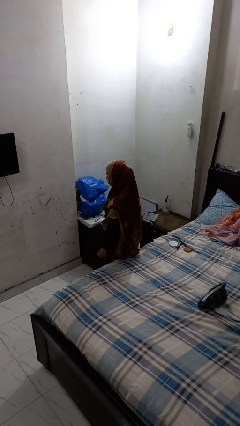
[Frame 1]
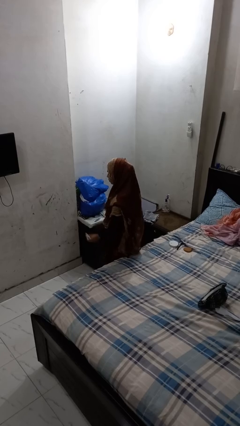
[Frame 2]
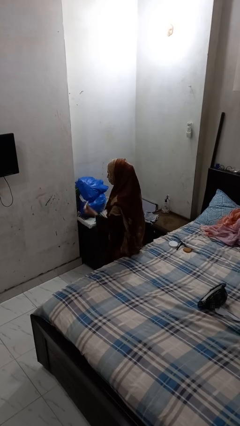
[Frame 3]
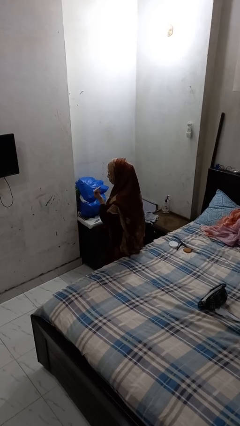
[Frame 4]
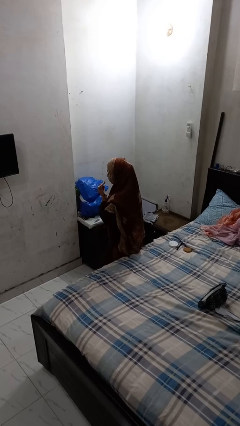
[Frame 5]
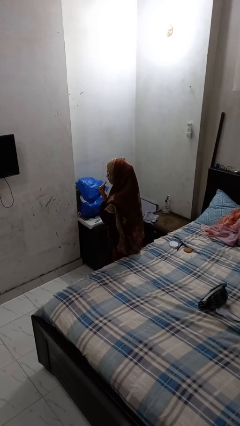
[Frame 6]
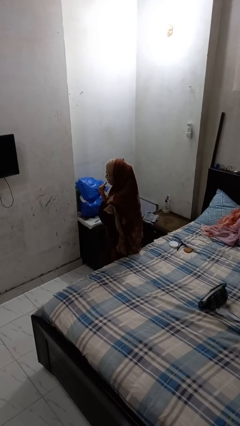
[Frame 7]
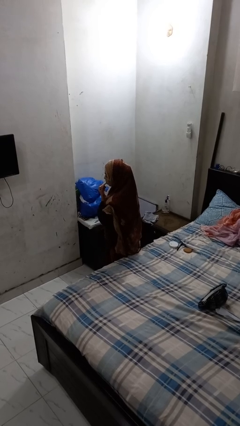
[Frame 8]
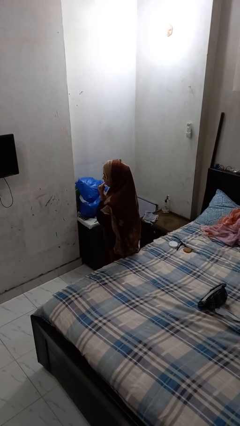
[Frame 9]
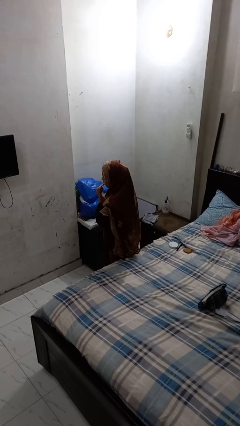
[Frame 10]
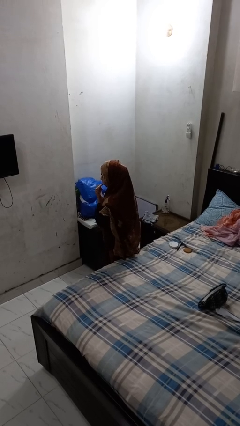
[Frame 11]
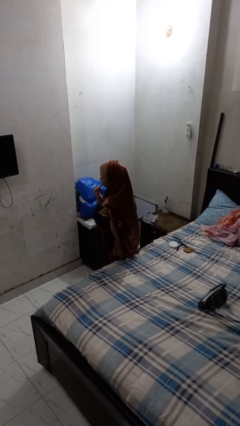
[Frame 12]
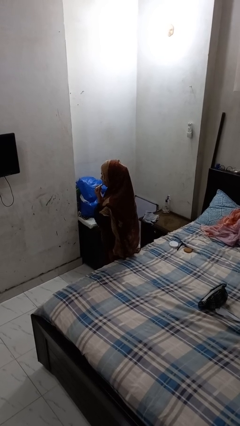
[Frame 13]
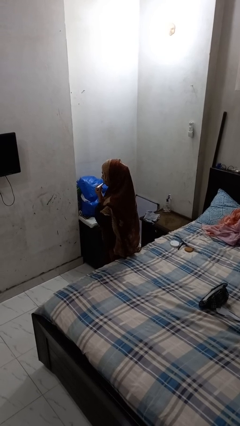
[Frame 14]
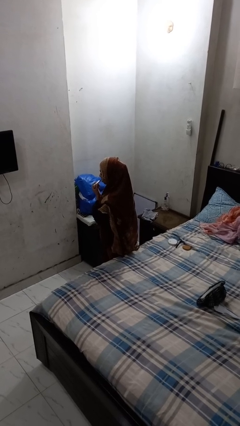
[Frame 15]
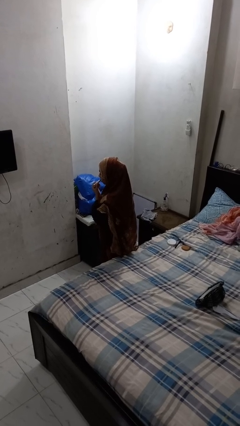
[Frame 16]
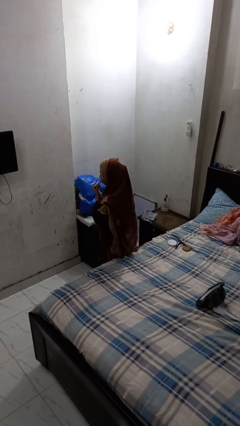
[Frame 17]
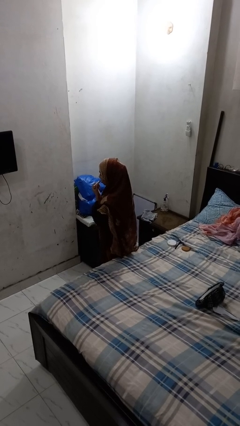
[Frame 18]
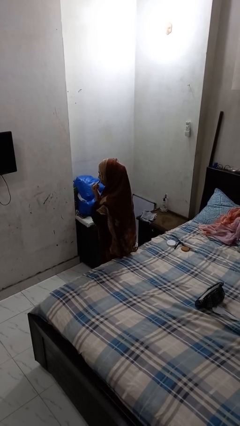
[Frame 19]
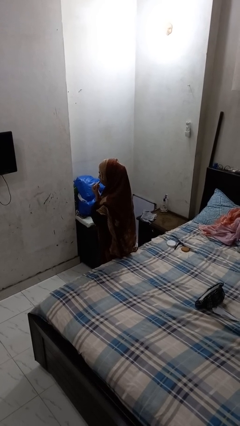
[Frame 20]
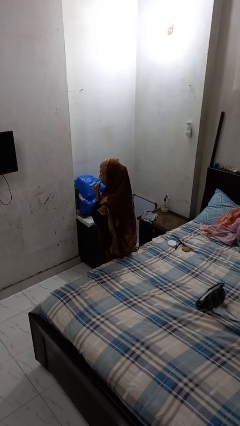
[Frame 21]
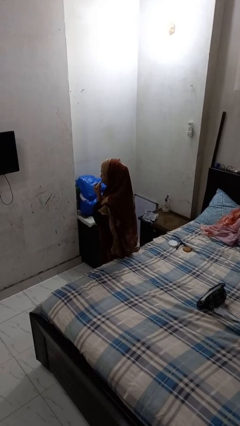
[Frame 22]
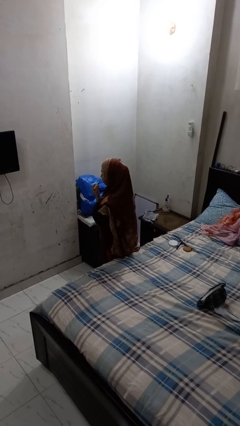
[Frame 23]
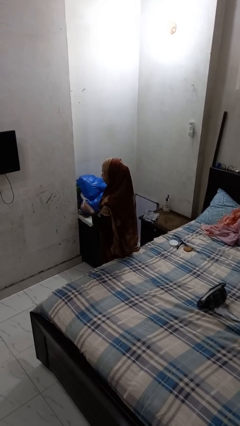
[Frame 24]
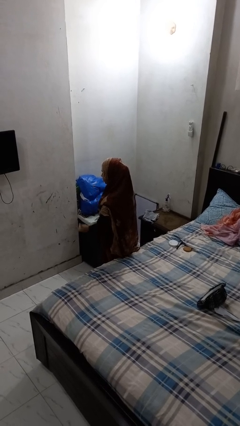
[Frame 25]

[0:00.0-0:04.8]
person applies lip makeup

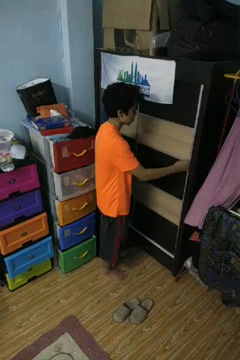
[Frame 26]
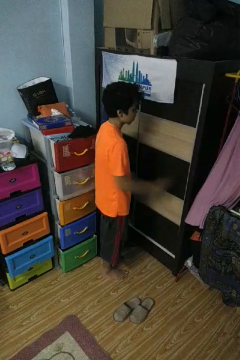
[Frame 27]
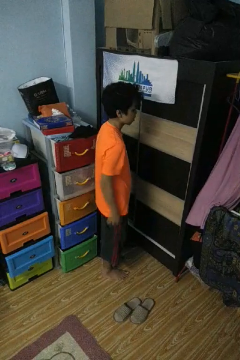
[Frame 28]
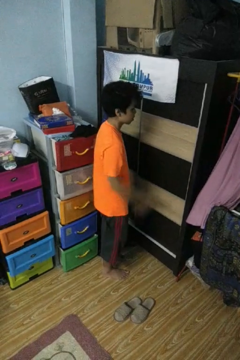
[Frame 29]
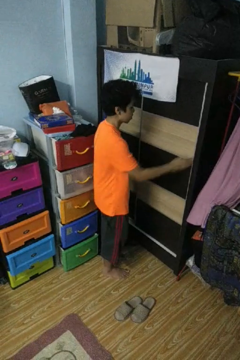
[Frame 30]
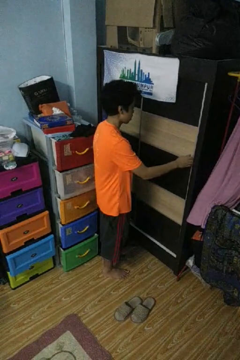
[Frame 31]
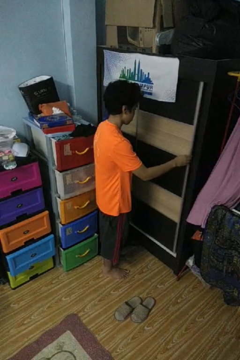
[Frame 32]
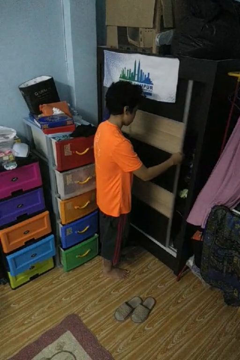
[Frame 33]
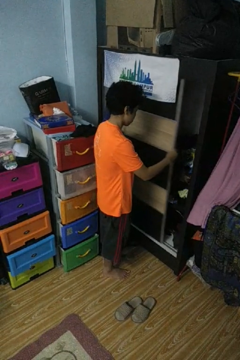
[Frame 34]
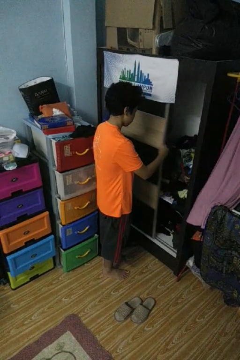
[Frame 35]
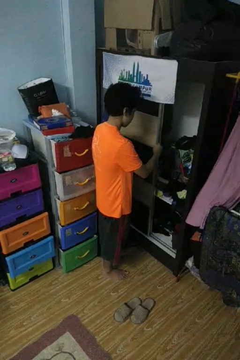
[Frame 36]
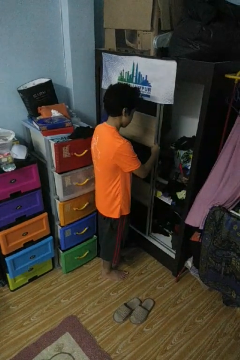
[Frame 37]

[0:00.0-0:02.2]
person opens closet door

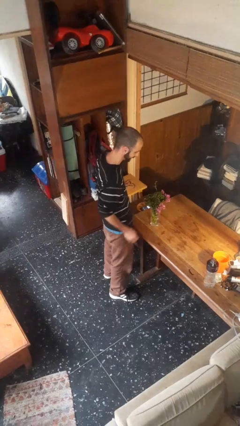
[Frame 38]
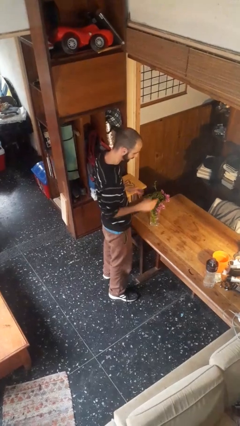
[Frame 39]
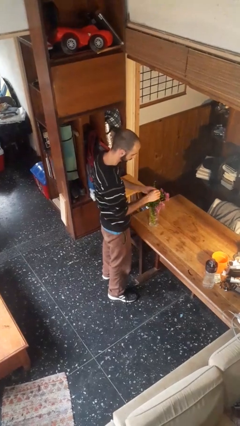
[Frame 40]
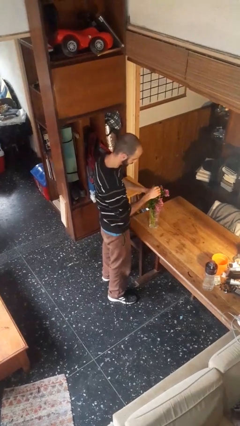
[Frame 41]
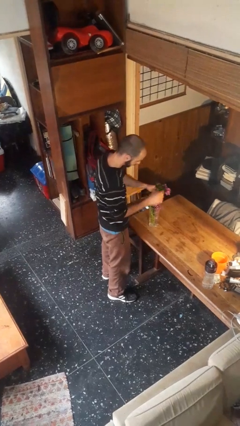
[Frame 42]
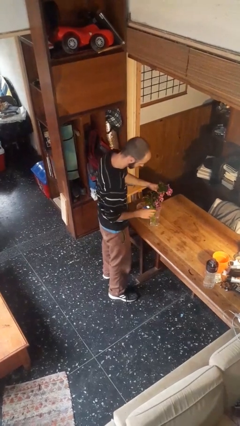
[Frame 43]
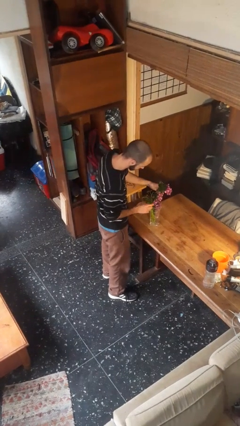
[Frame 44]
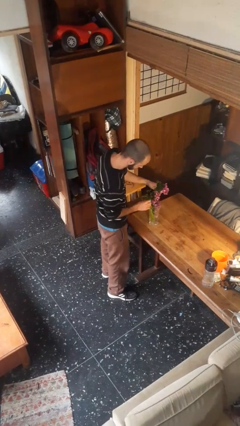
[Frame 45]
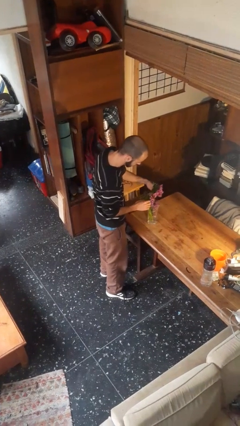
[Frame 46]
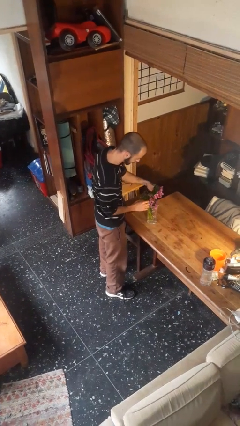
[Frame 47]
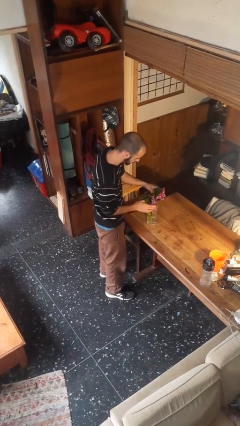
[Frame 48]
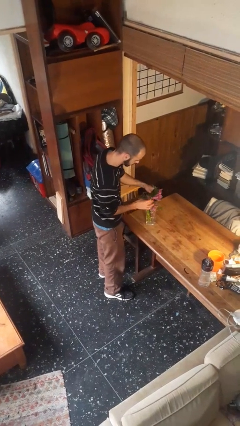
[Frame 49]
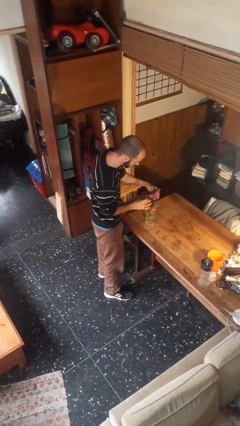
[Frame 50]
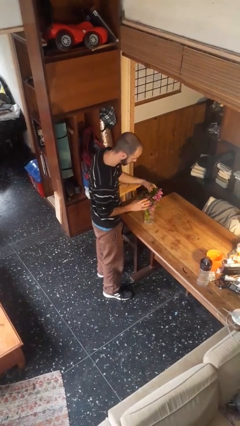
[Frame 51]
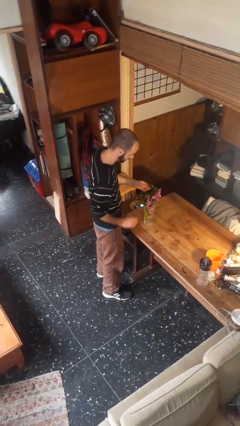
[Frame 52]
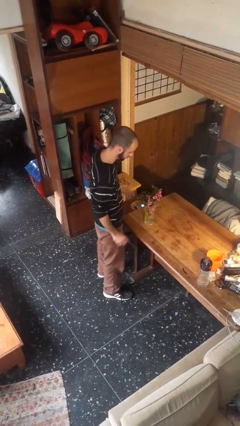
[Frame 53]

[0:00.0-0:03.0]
person arranges flowers in vase

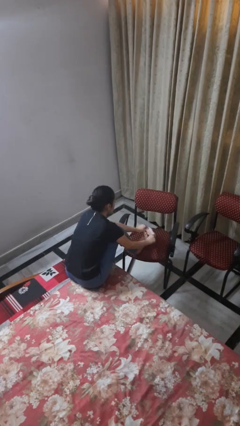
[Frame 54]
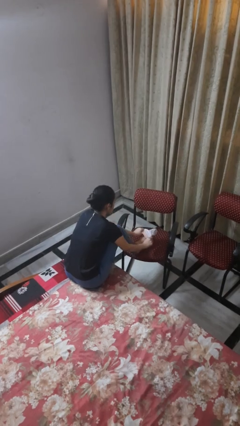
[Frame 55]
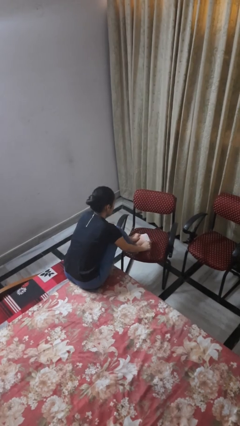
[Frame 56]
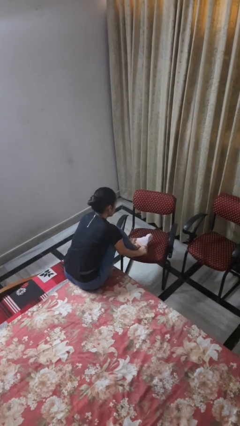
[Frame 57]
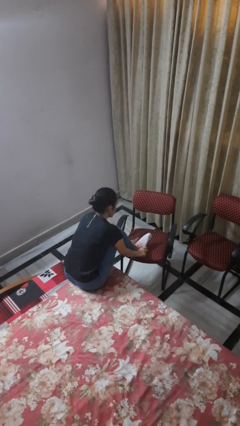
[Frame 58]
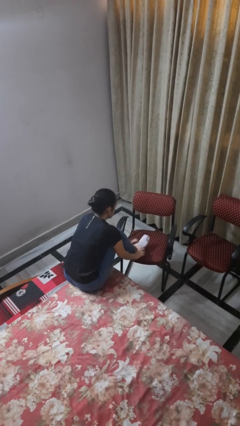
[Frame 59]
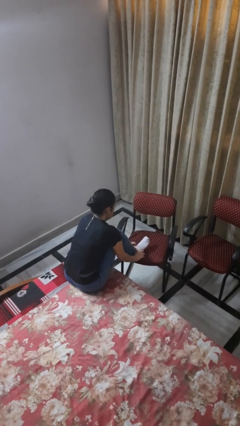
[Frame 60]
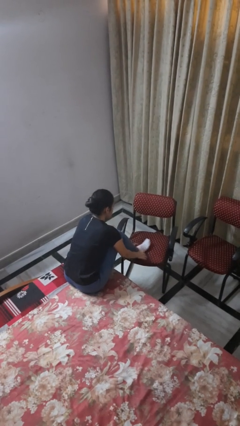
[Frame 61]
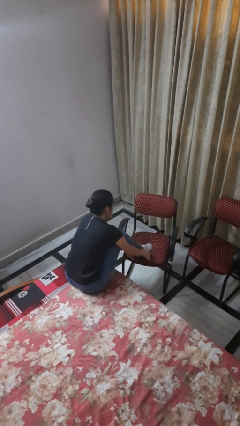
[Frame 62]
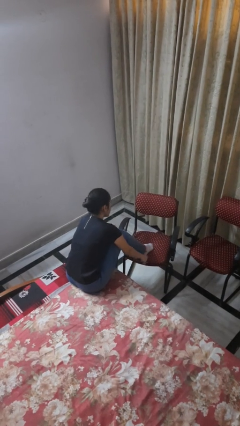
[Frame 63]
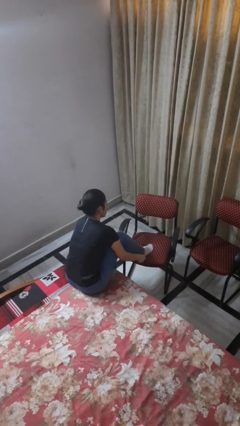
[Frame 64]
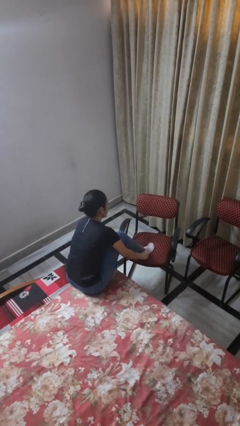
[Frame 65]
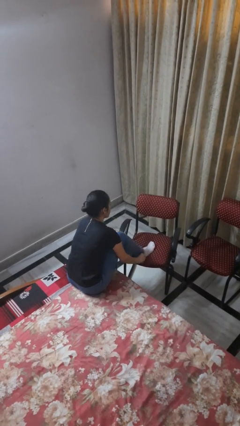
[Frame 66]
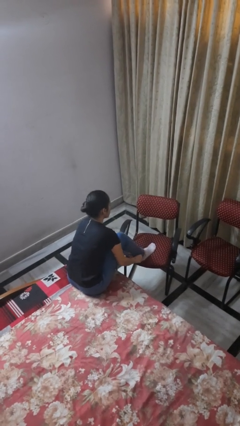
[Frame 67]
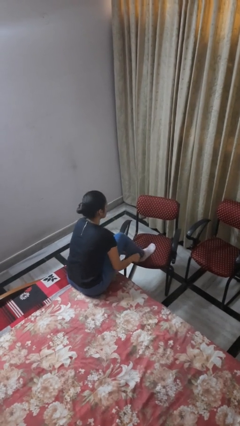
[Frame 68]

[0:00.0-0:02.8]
person puts on socks

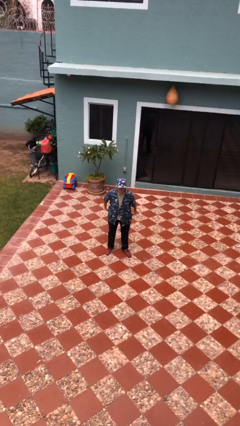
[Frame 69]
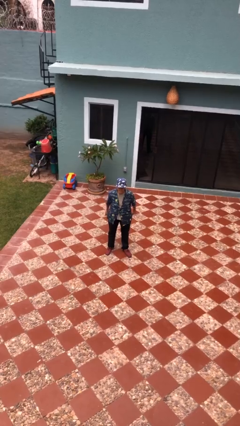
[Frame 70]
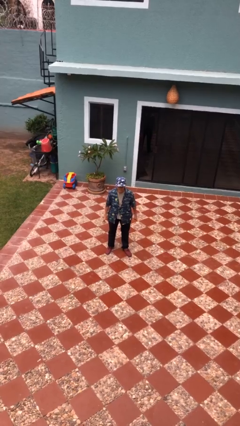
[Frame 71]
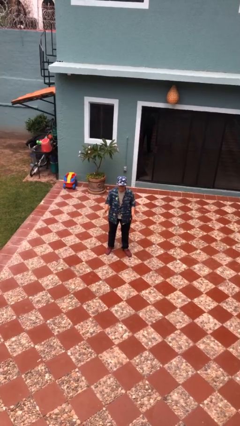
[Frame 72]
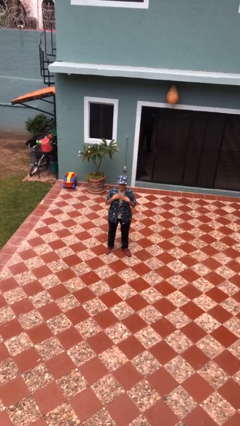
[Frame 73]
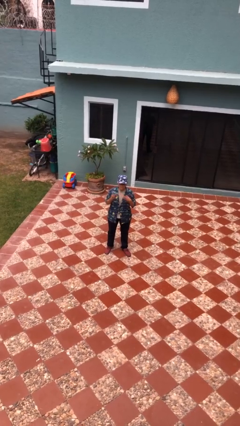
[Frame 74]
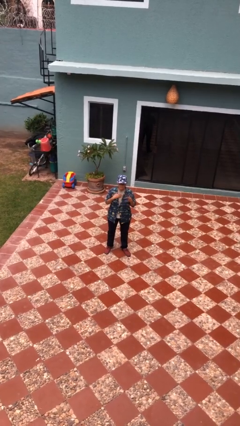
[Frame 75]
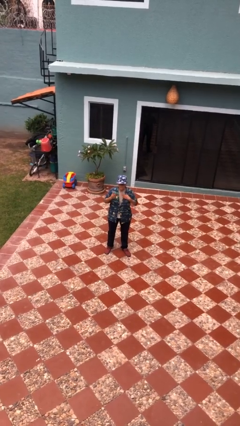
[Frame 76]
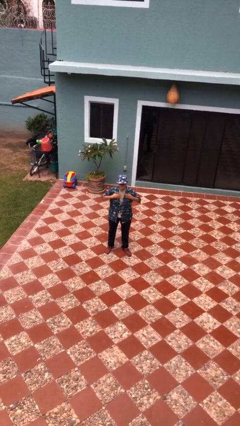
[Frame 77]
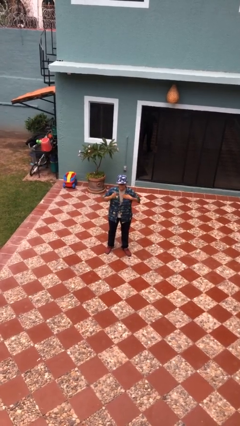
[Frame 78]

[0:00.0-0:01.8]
person drums on chest

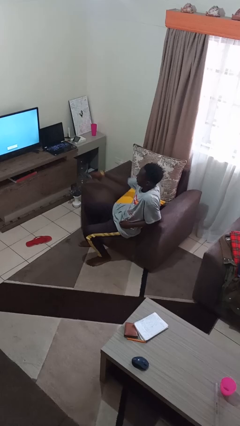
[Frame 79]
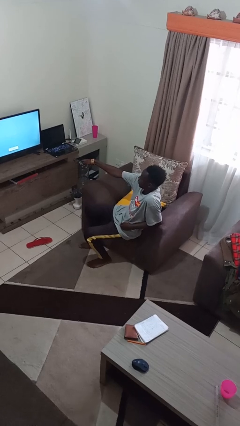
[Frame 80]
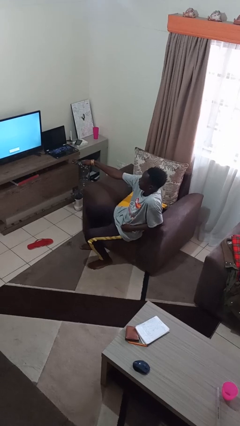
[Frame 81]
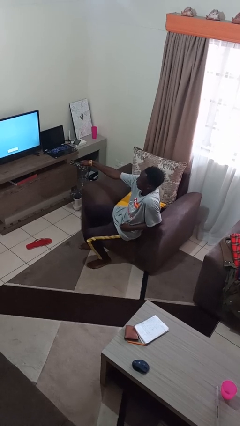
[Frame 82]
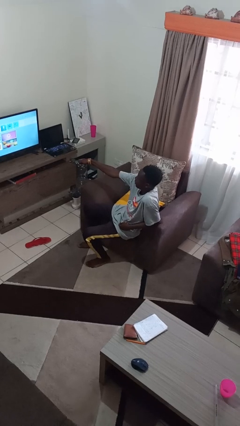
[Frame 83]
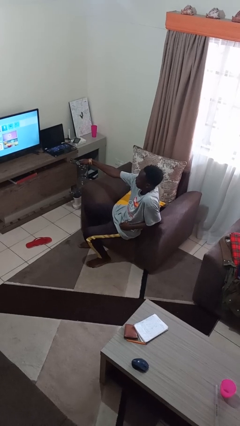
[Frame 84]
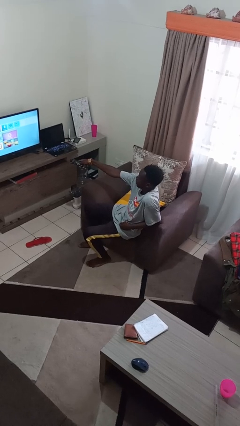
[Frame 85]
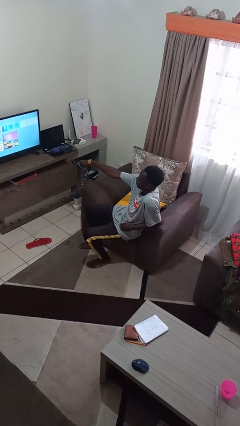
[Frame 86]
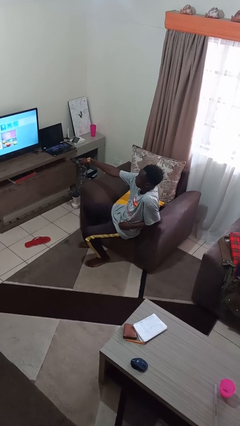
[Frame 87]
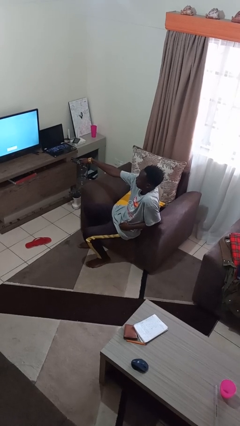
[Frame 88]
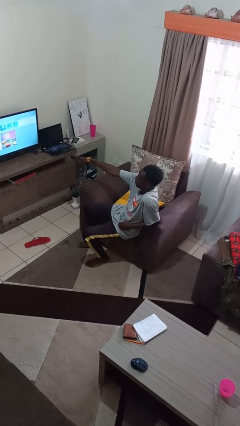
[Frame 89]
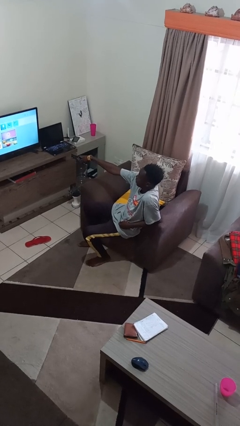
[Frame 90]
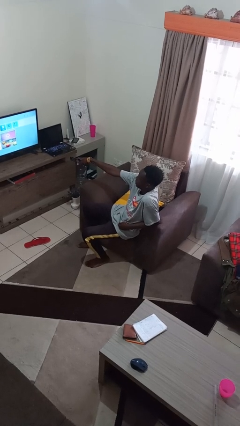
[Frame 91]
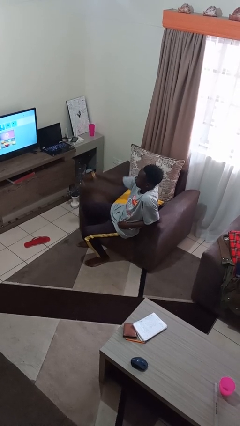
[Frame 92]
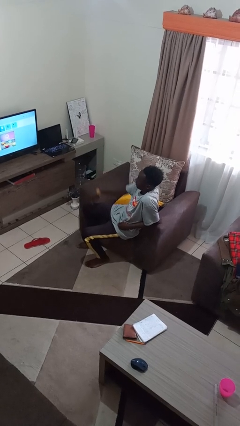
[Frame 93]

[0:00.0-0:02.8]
person uses television remote
